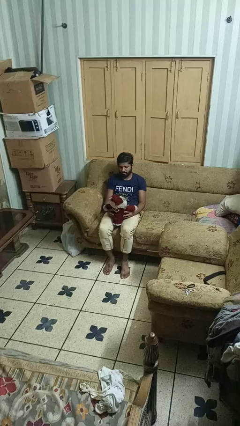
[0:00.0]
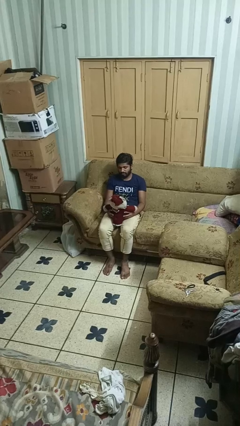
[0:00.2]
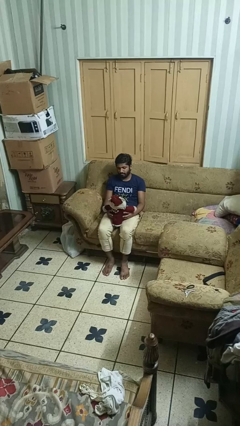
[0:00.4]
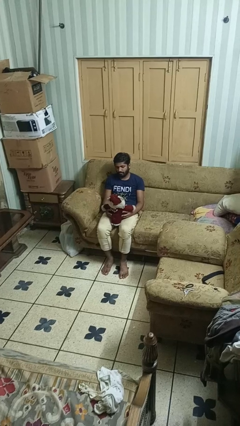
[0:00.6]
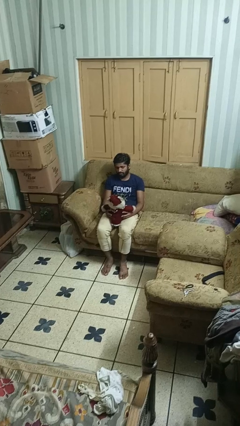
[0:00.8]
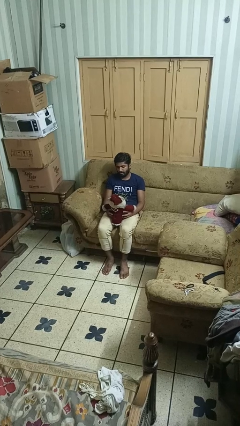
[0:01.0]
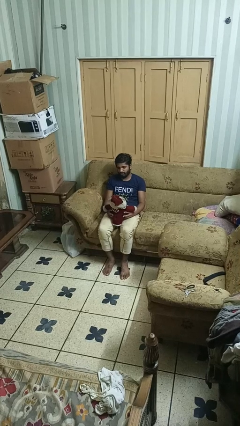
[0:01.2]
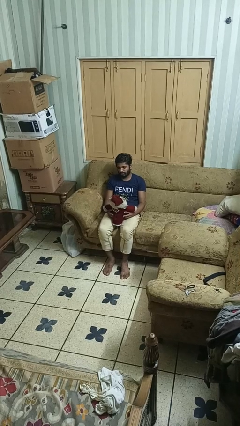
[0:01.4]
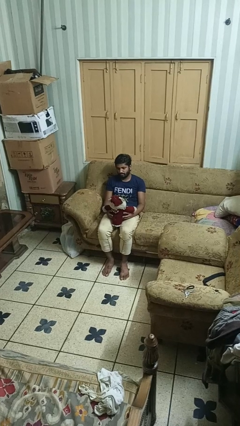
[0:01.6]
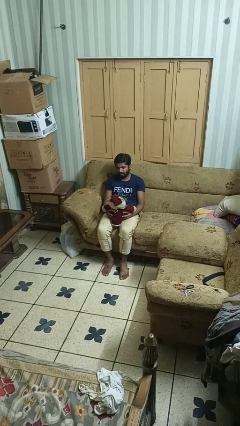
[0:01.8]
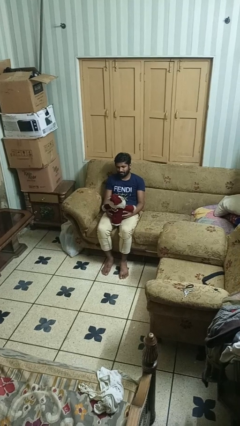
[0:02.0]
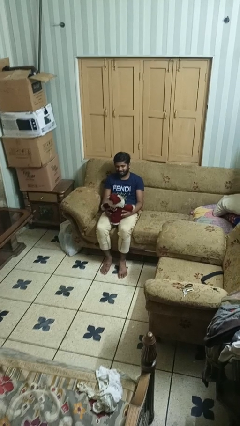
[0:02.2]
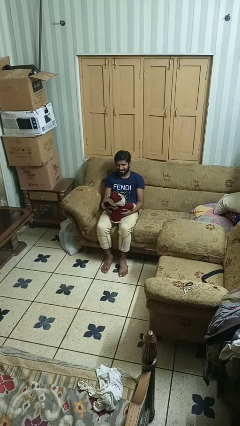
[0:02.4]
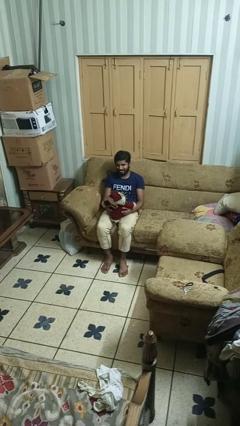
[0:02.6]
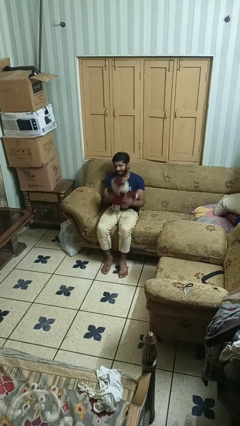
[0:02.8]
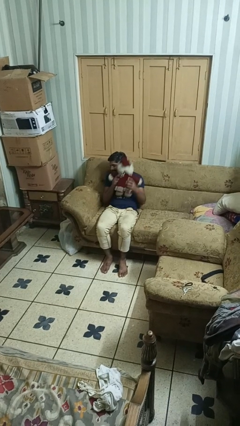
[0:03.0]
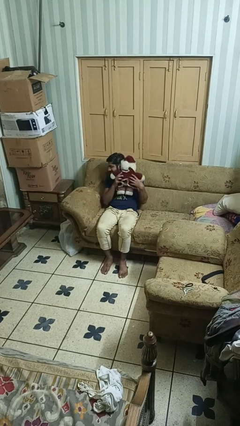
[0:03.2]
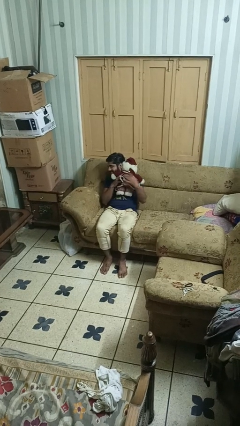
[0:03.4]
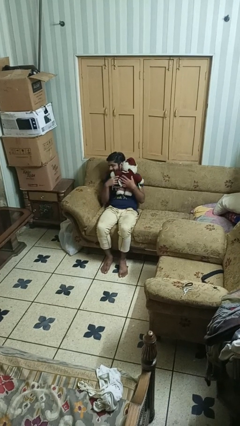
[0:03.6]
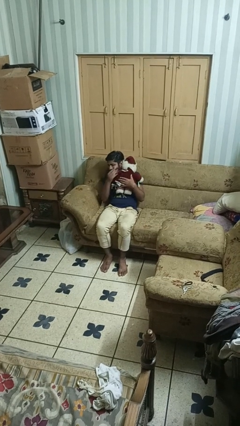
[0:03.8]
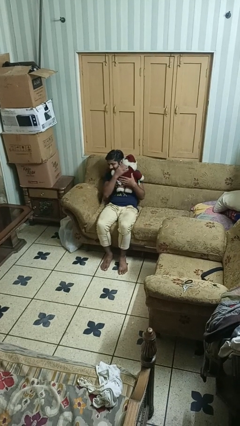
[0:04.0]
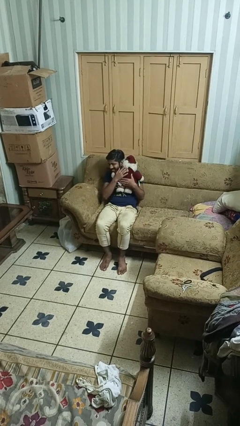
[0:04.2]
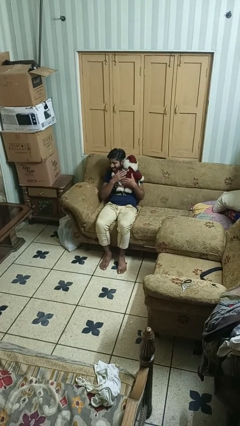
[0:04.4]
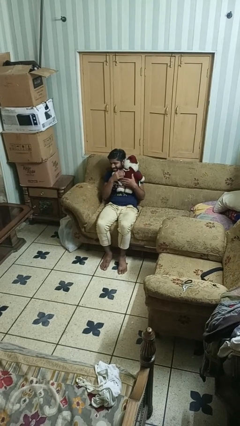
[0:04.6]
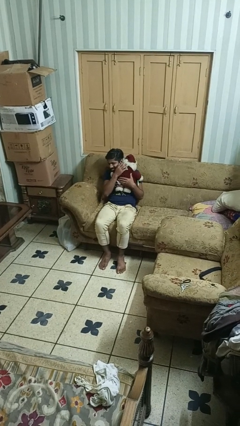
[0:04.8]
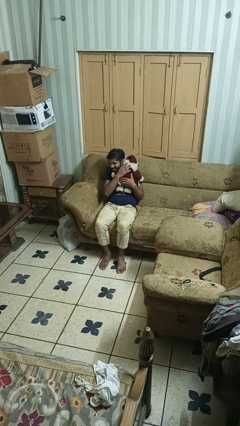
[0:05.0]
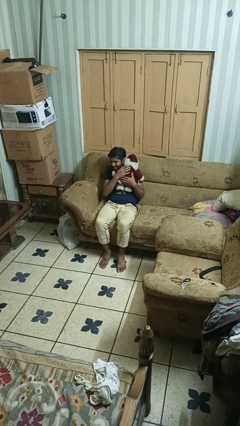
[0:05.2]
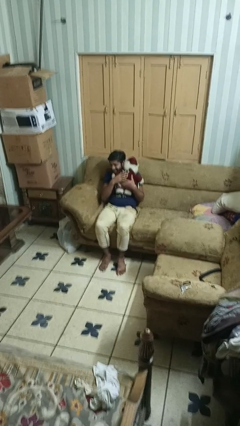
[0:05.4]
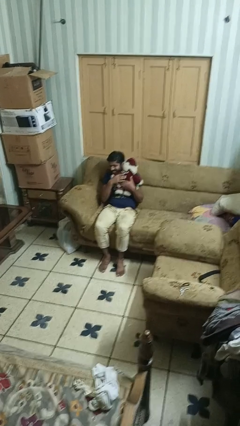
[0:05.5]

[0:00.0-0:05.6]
person hugs stuffed animal

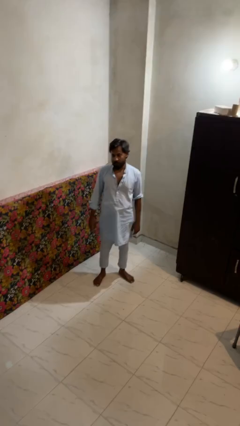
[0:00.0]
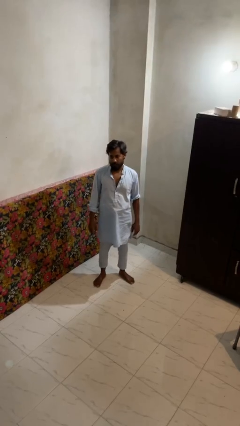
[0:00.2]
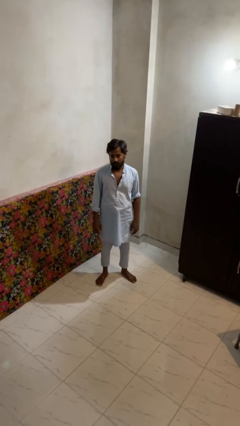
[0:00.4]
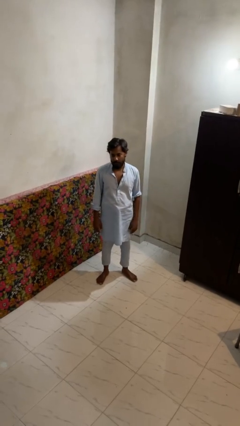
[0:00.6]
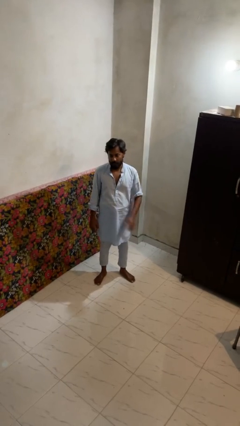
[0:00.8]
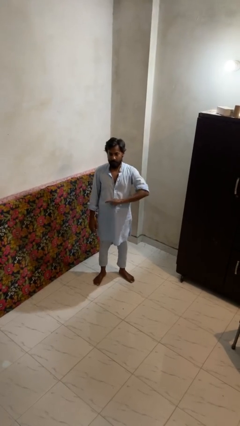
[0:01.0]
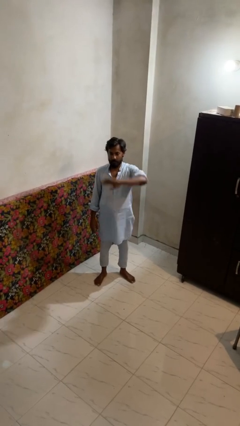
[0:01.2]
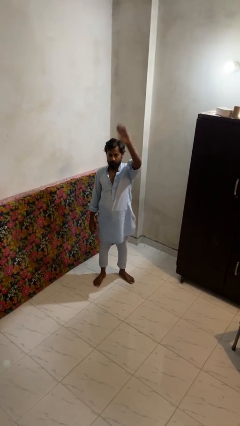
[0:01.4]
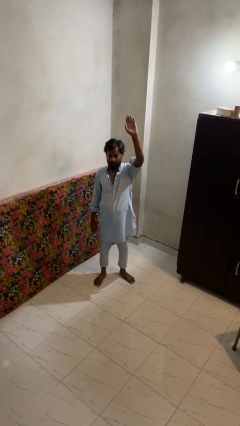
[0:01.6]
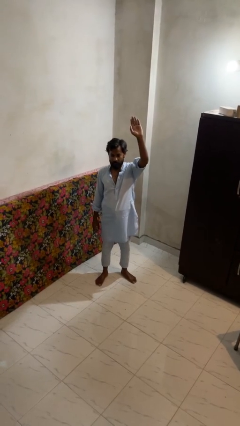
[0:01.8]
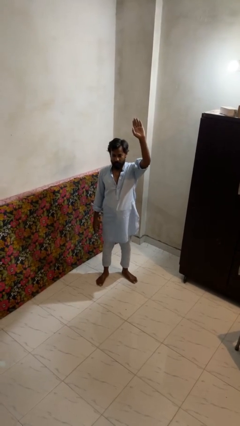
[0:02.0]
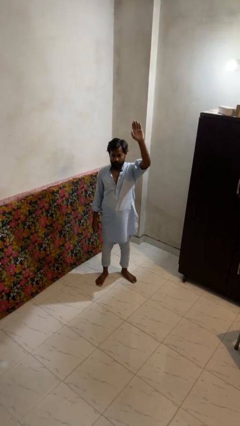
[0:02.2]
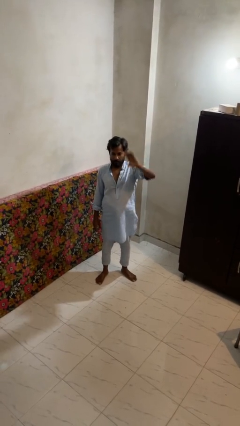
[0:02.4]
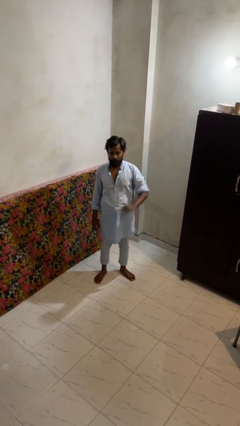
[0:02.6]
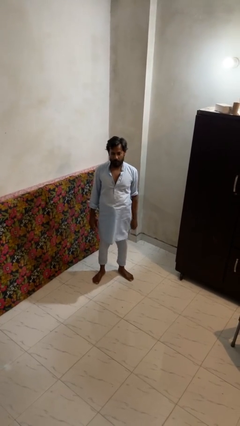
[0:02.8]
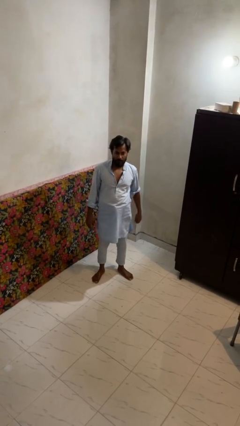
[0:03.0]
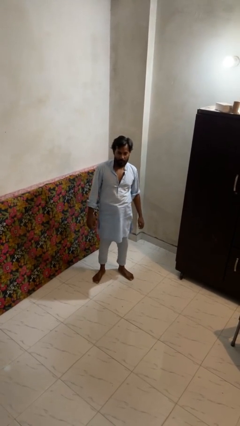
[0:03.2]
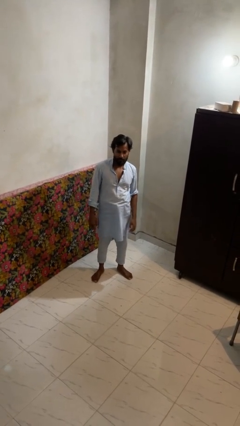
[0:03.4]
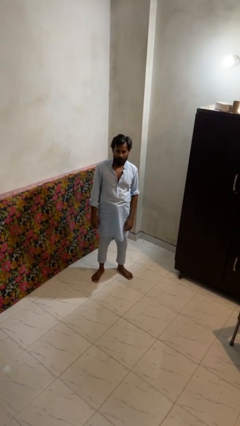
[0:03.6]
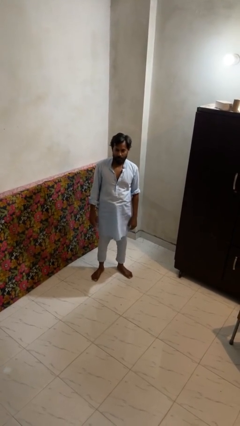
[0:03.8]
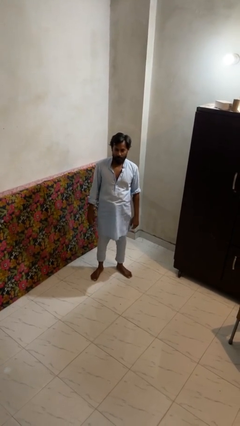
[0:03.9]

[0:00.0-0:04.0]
person gestures swipe up

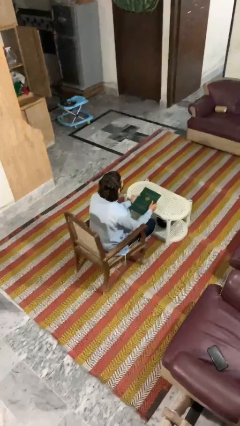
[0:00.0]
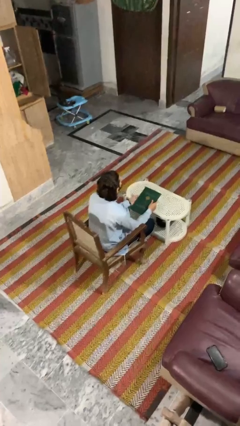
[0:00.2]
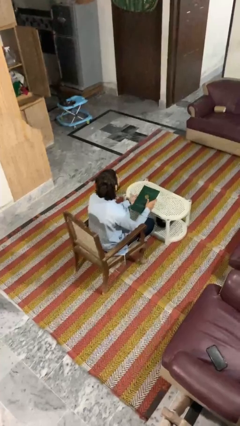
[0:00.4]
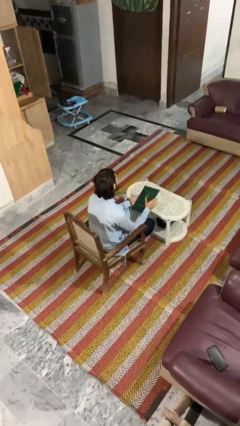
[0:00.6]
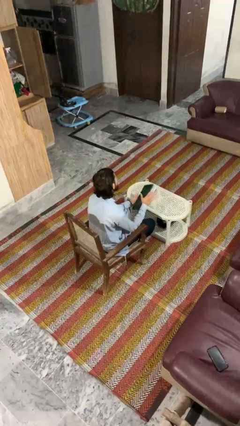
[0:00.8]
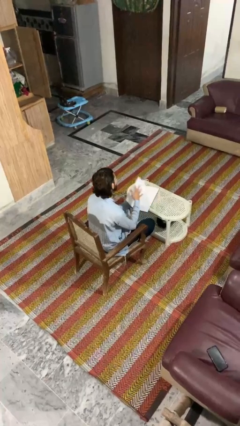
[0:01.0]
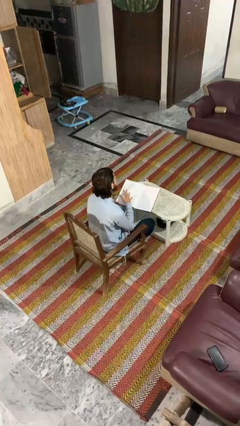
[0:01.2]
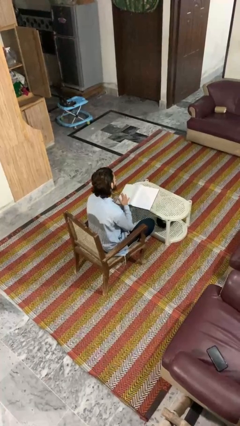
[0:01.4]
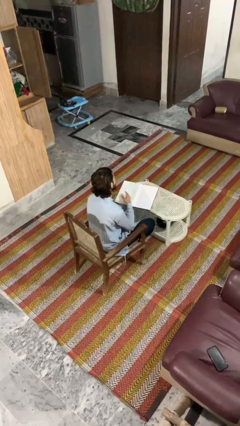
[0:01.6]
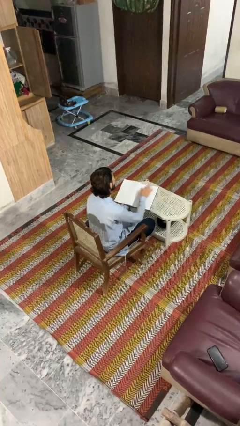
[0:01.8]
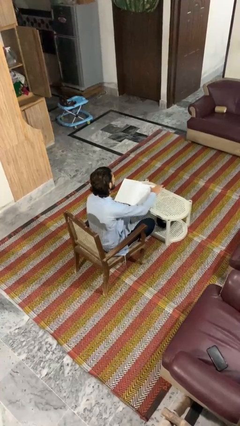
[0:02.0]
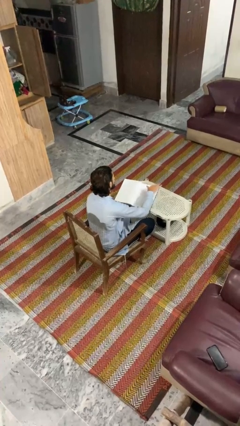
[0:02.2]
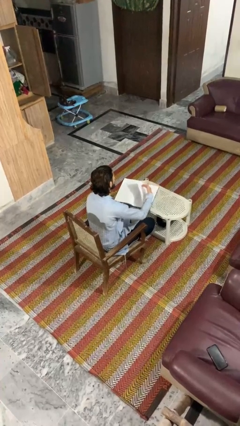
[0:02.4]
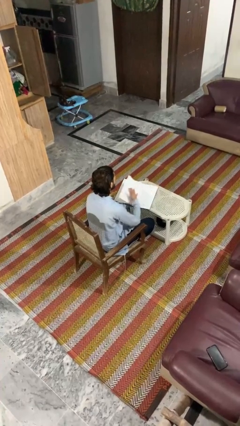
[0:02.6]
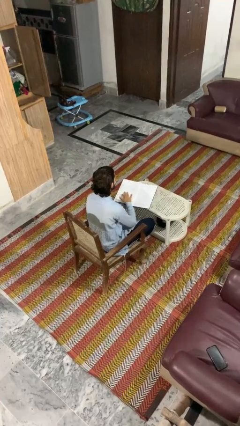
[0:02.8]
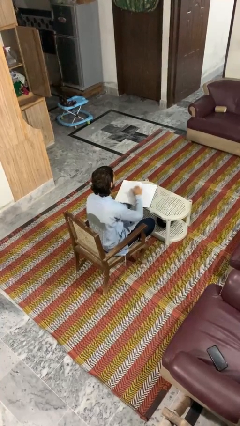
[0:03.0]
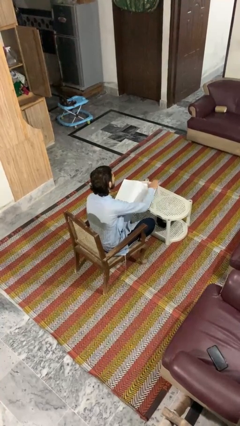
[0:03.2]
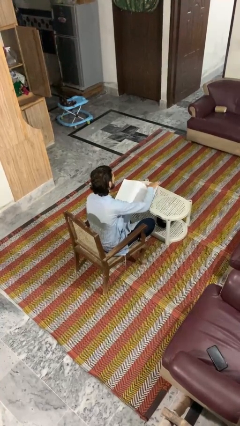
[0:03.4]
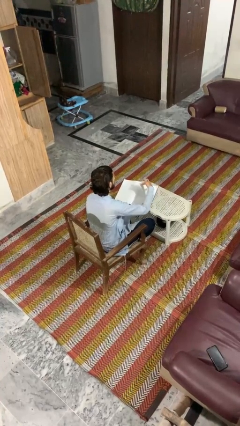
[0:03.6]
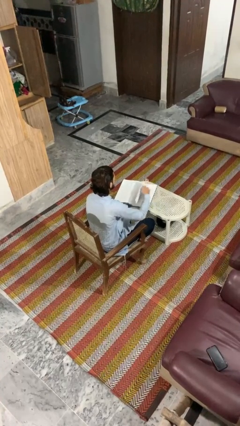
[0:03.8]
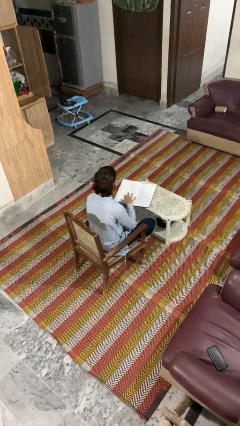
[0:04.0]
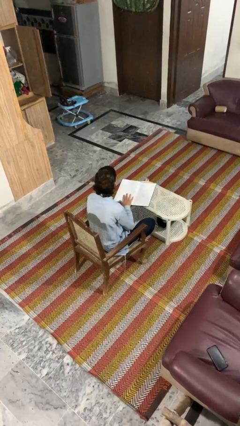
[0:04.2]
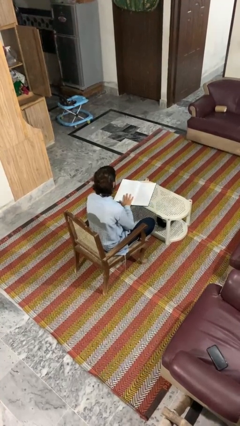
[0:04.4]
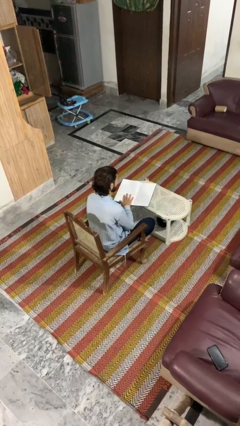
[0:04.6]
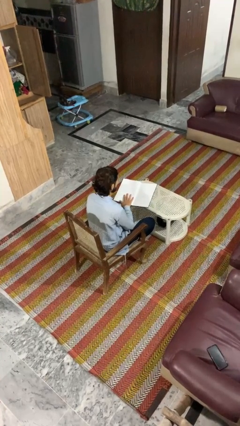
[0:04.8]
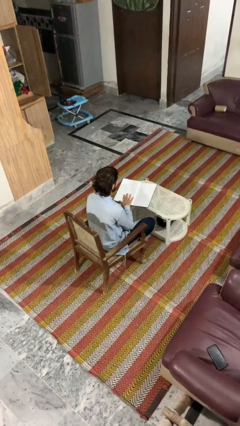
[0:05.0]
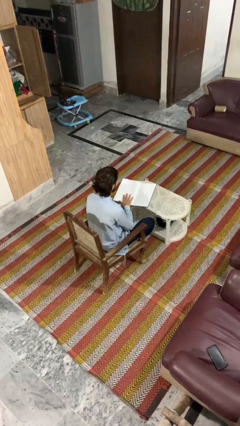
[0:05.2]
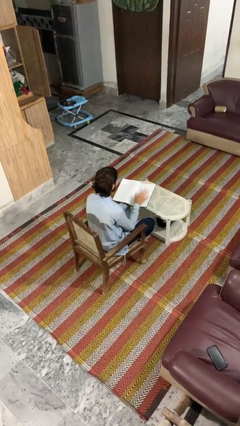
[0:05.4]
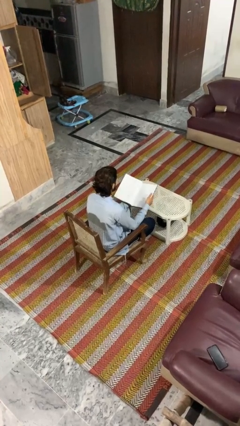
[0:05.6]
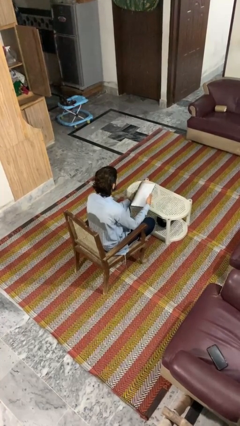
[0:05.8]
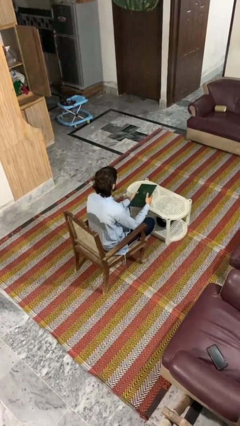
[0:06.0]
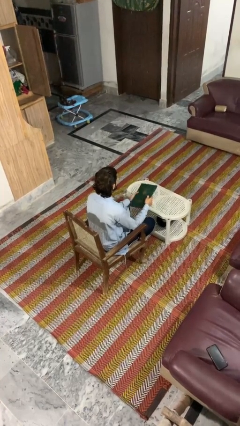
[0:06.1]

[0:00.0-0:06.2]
person reads book

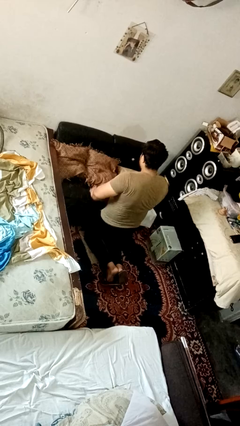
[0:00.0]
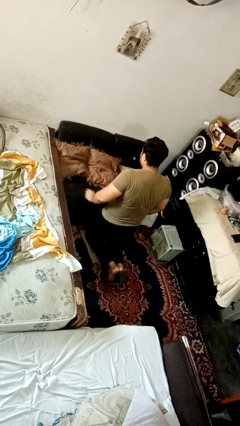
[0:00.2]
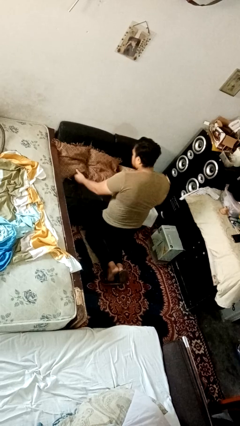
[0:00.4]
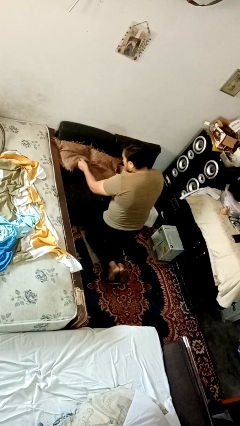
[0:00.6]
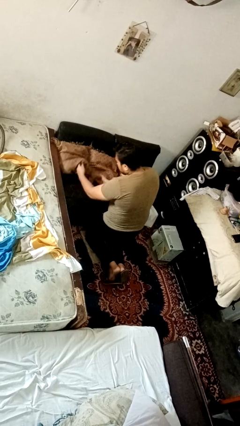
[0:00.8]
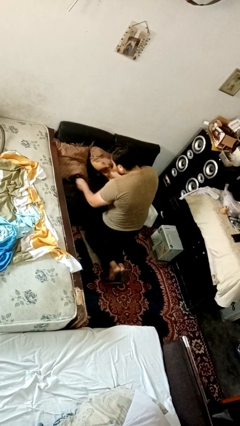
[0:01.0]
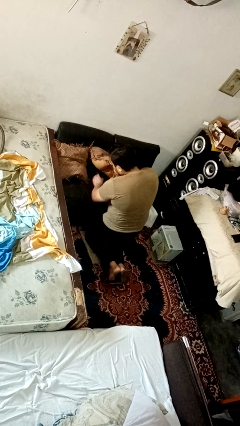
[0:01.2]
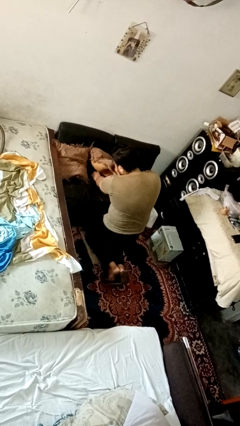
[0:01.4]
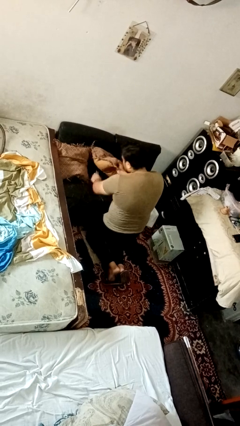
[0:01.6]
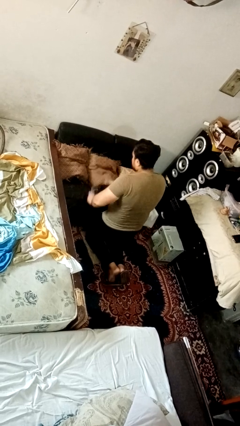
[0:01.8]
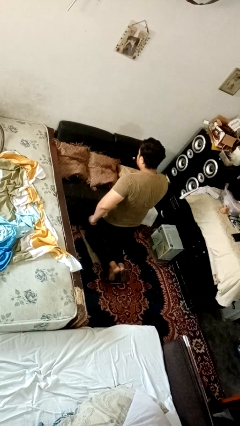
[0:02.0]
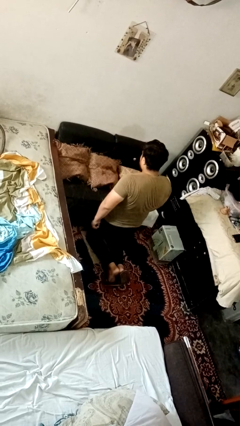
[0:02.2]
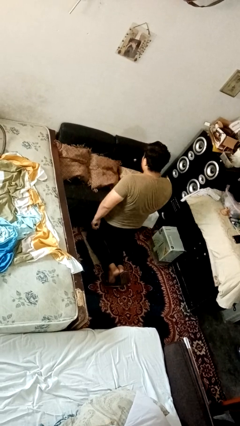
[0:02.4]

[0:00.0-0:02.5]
person searches in couch
